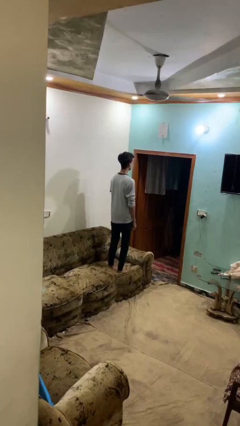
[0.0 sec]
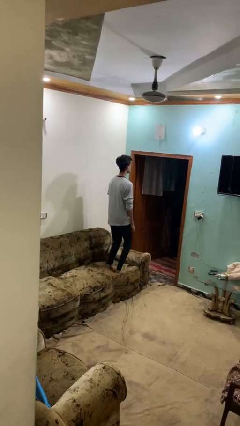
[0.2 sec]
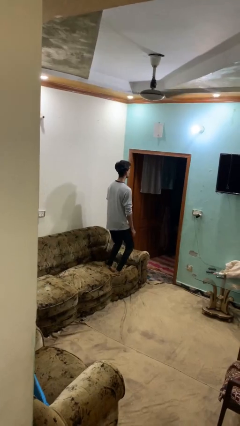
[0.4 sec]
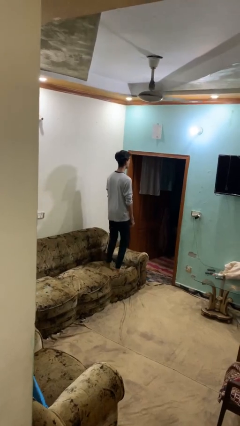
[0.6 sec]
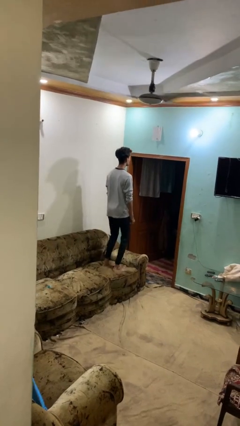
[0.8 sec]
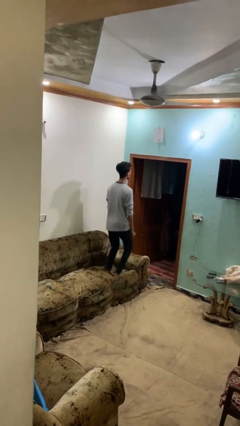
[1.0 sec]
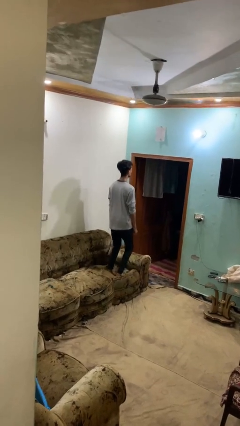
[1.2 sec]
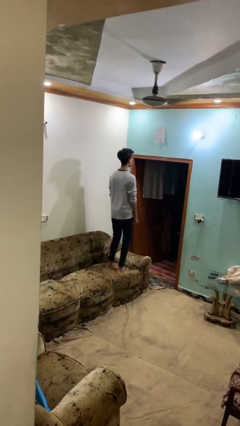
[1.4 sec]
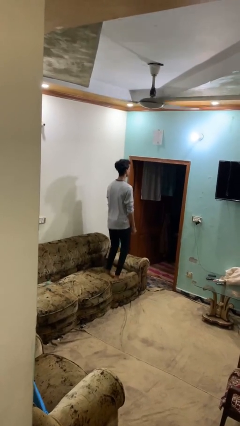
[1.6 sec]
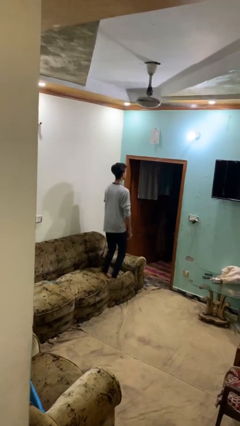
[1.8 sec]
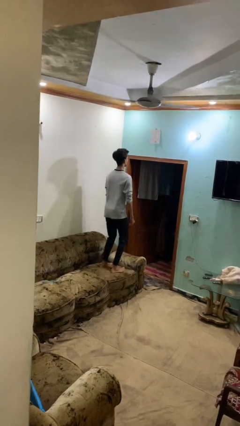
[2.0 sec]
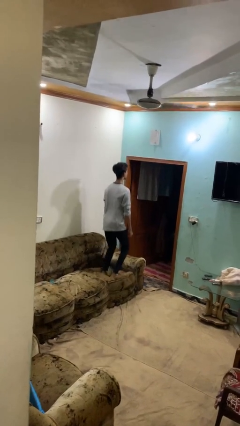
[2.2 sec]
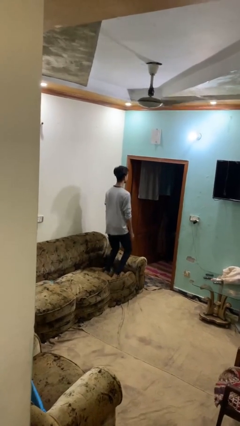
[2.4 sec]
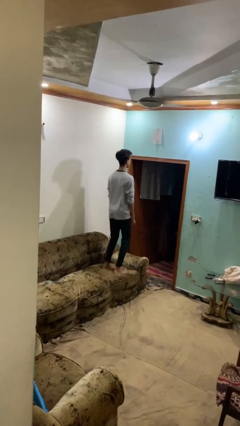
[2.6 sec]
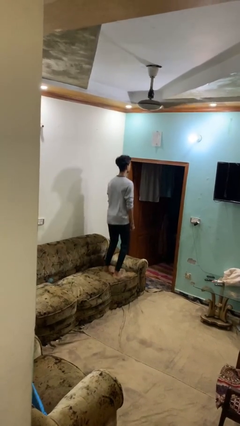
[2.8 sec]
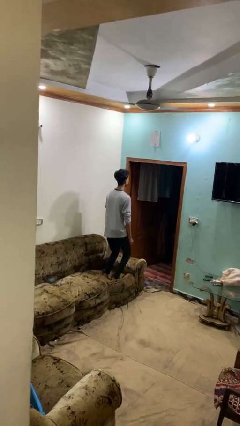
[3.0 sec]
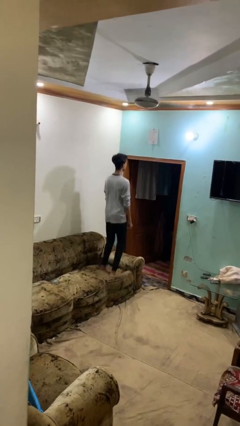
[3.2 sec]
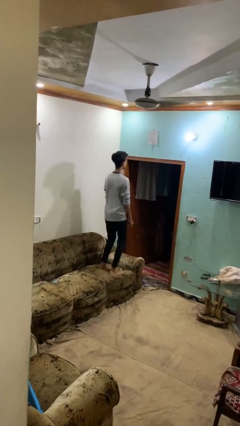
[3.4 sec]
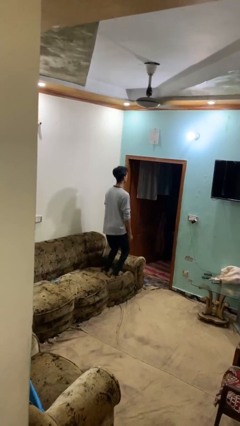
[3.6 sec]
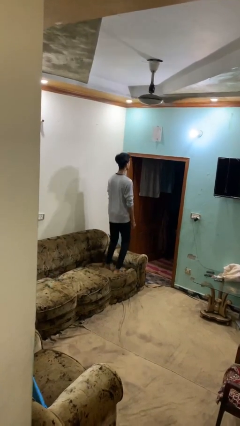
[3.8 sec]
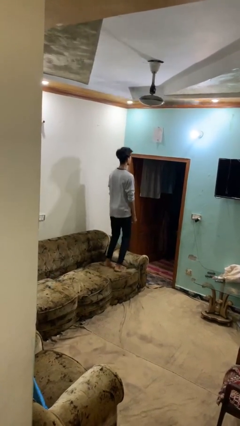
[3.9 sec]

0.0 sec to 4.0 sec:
person jumps on couch

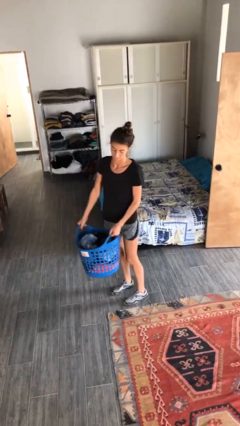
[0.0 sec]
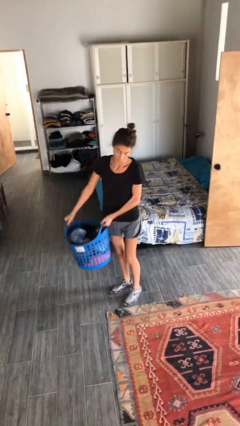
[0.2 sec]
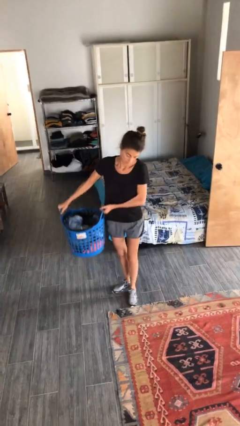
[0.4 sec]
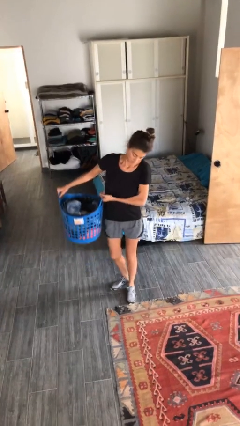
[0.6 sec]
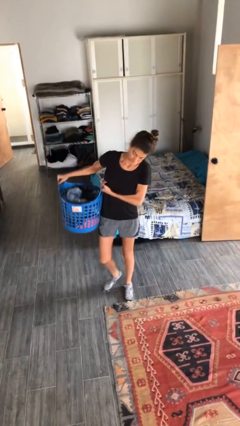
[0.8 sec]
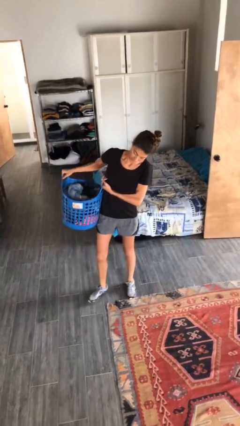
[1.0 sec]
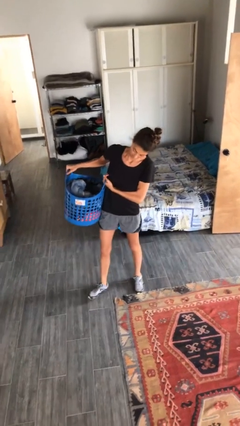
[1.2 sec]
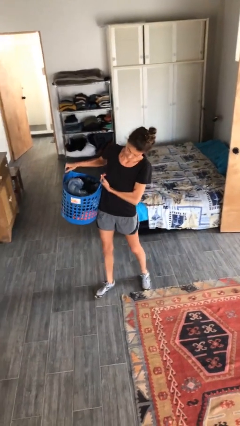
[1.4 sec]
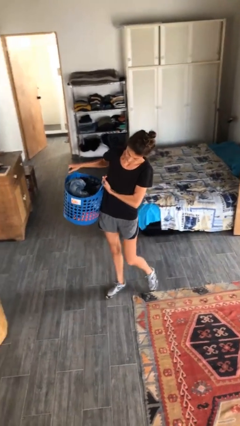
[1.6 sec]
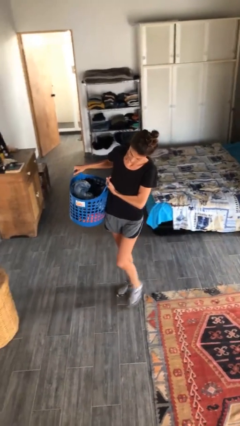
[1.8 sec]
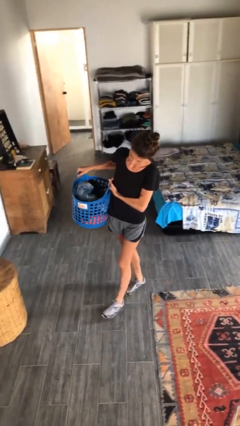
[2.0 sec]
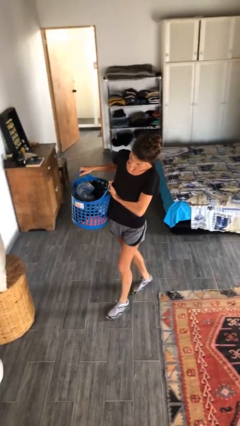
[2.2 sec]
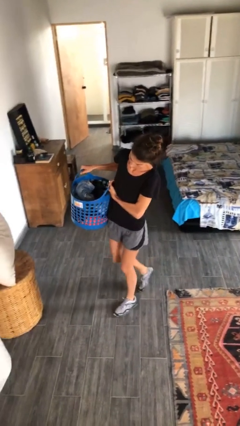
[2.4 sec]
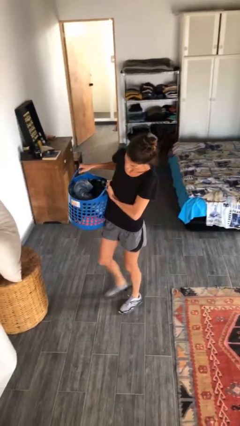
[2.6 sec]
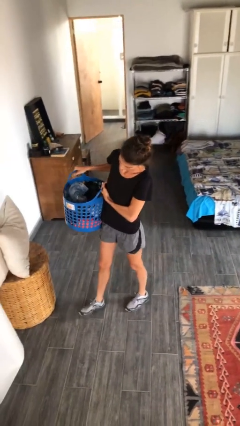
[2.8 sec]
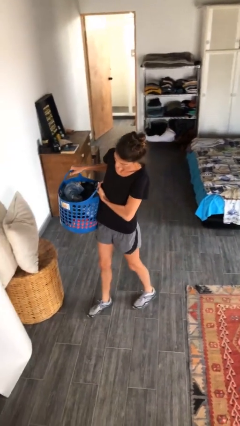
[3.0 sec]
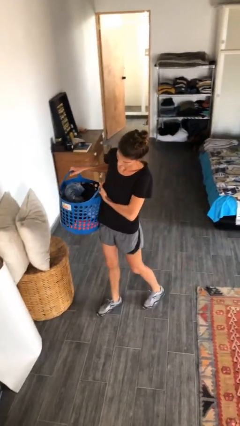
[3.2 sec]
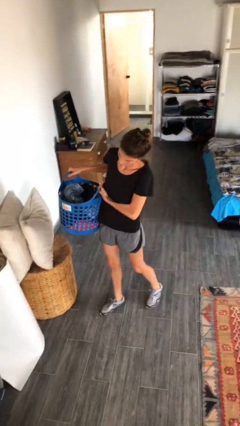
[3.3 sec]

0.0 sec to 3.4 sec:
person carries laundry basket

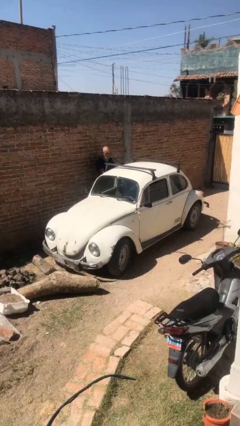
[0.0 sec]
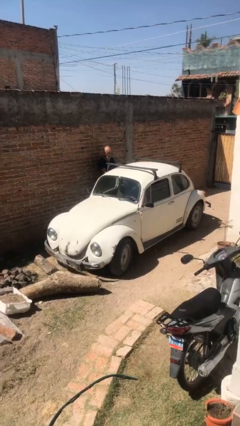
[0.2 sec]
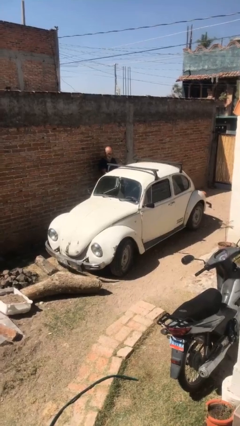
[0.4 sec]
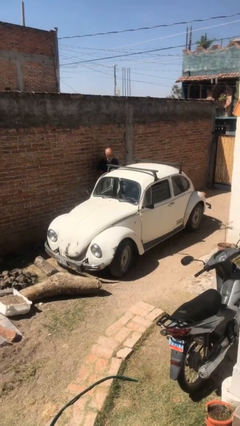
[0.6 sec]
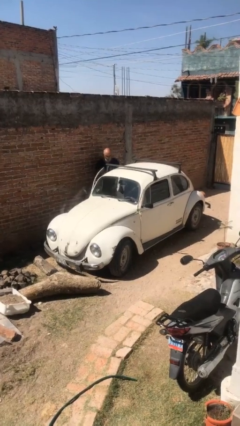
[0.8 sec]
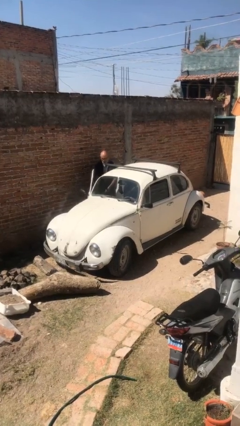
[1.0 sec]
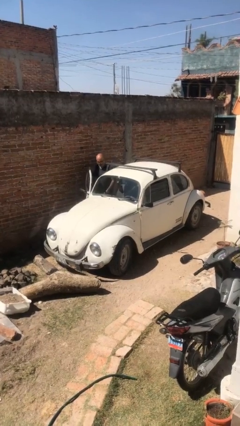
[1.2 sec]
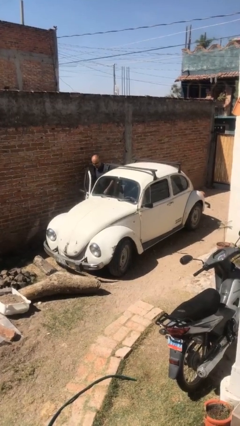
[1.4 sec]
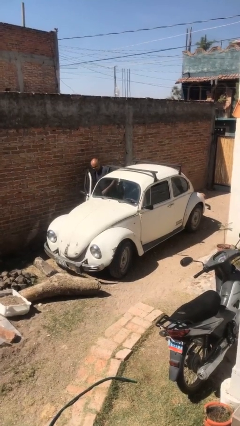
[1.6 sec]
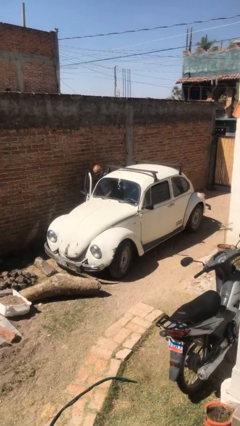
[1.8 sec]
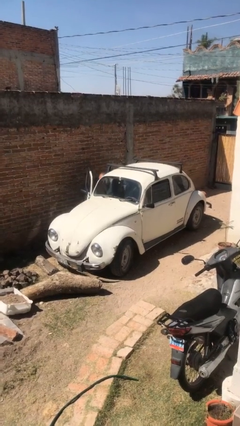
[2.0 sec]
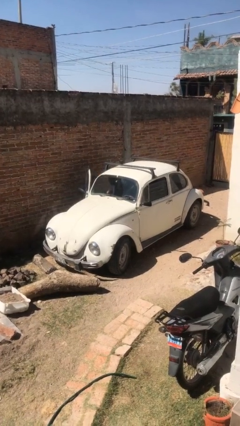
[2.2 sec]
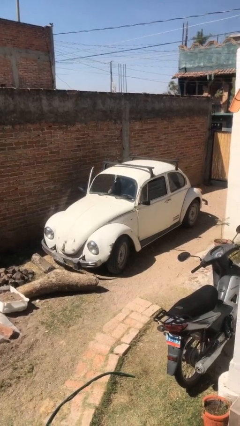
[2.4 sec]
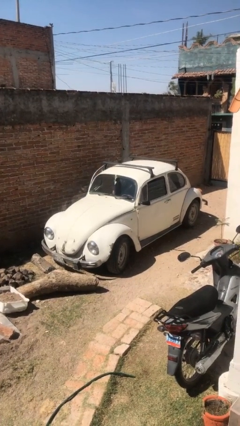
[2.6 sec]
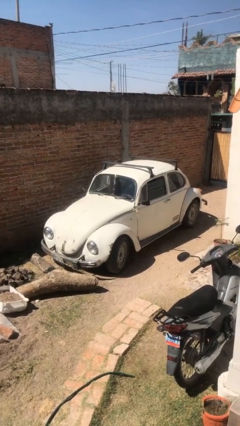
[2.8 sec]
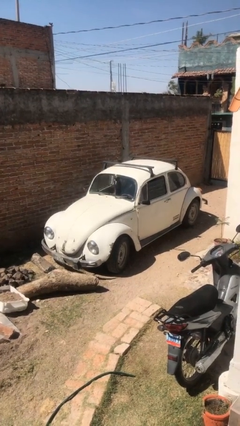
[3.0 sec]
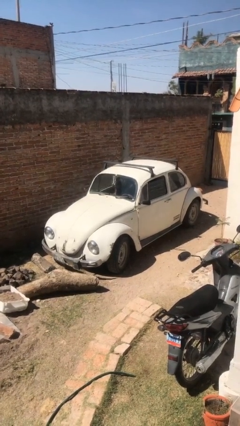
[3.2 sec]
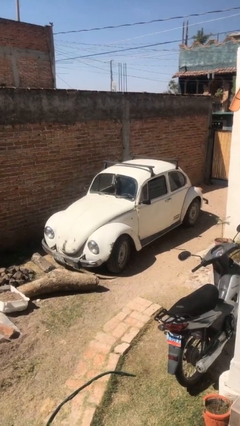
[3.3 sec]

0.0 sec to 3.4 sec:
car picks up person

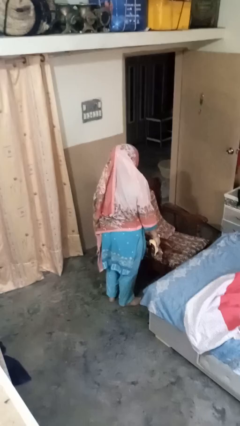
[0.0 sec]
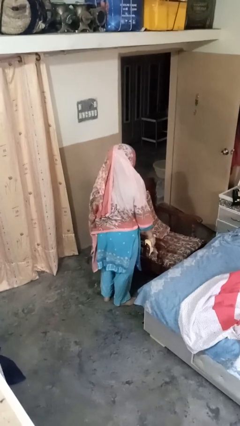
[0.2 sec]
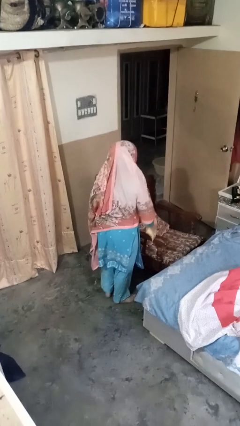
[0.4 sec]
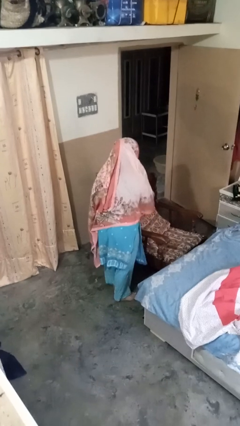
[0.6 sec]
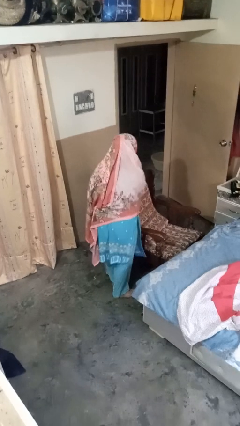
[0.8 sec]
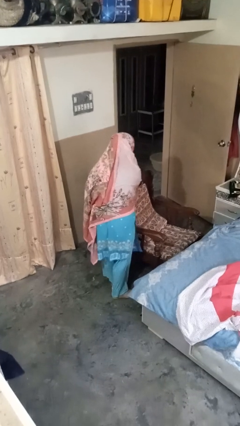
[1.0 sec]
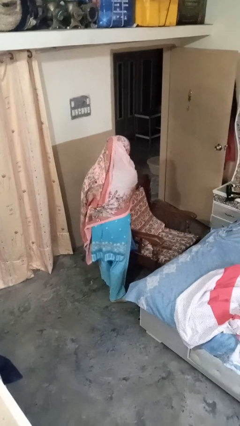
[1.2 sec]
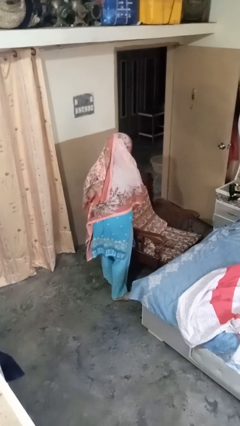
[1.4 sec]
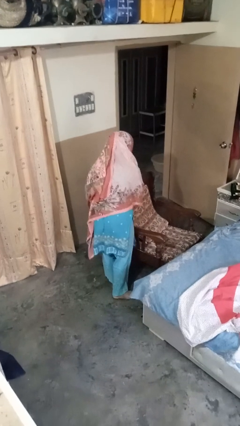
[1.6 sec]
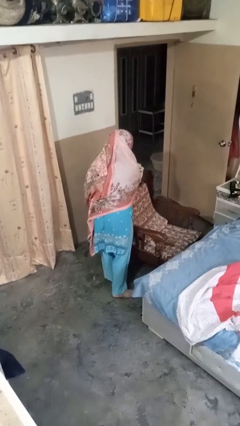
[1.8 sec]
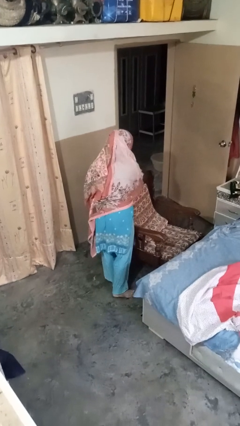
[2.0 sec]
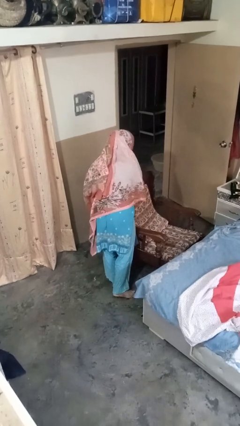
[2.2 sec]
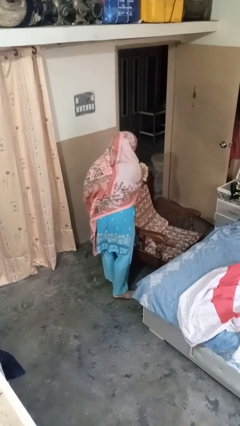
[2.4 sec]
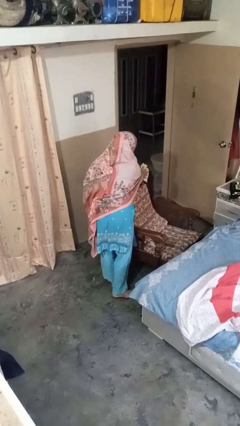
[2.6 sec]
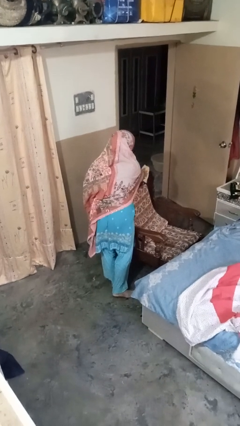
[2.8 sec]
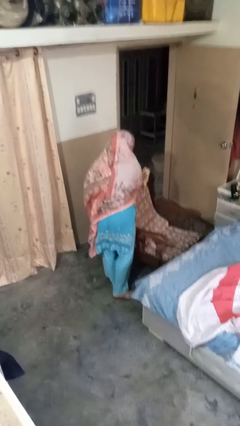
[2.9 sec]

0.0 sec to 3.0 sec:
person dusts furniture

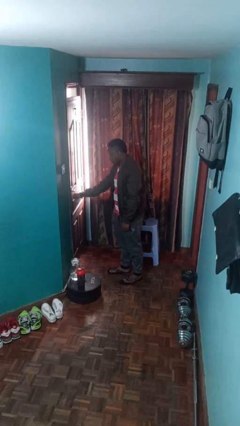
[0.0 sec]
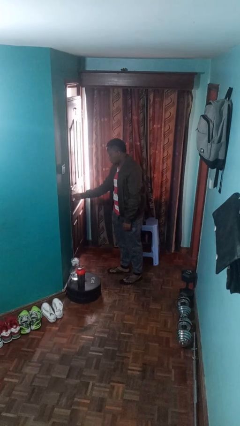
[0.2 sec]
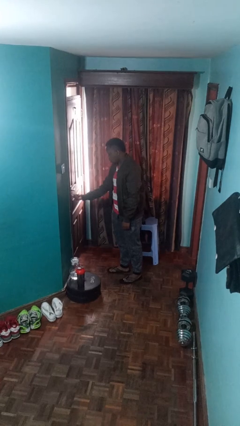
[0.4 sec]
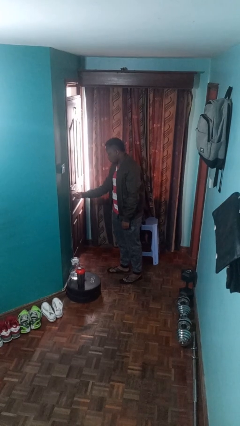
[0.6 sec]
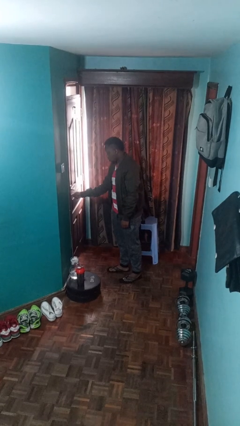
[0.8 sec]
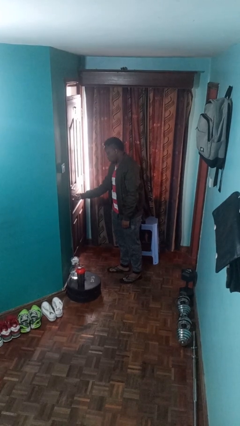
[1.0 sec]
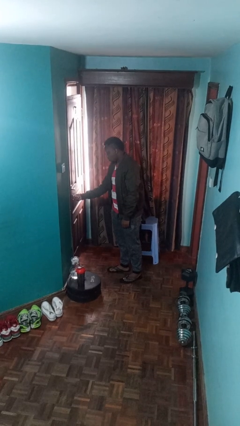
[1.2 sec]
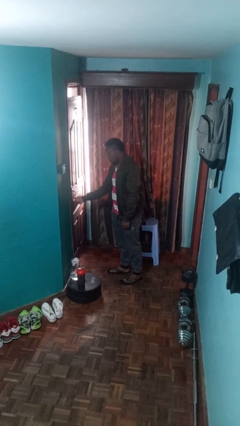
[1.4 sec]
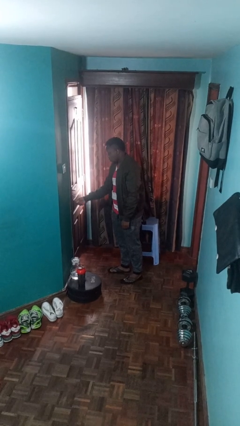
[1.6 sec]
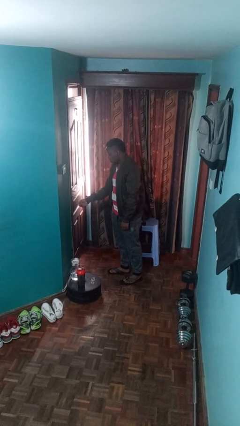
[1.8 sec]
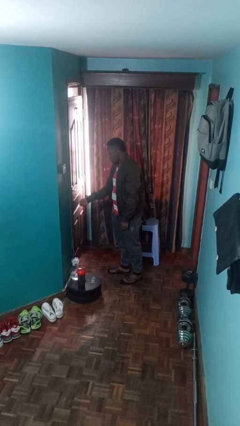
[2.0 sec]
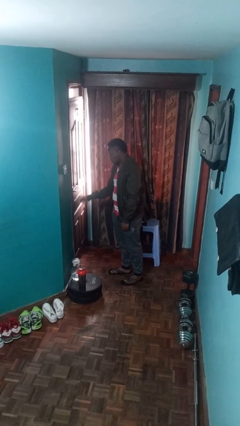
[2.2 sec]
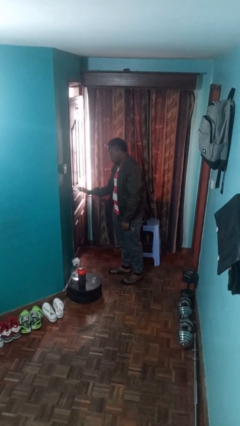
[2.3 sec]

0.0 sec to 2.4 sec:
person unlocks door with keys

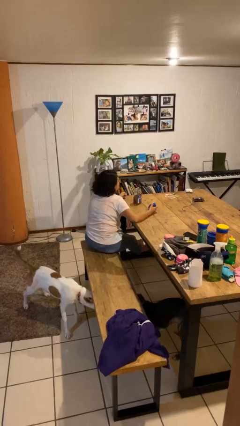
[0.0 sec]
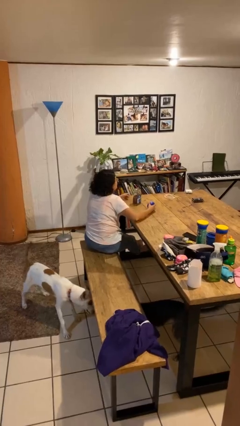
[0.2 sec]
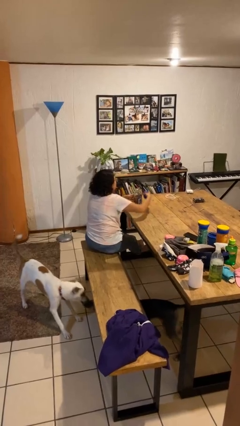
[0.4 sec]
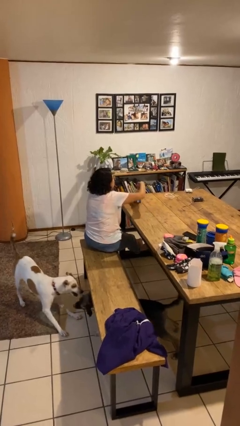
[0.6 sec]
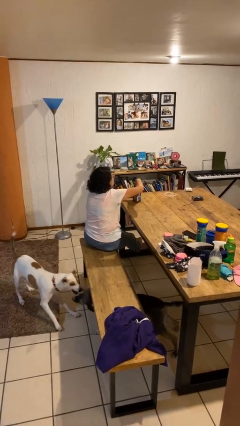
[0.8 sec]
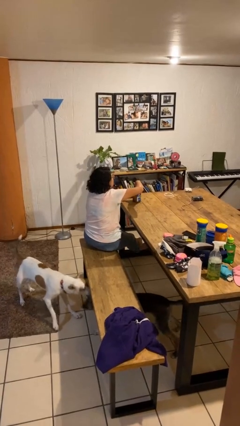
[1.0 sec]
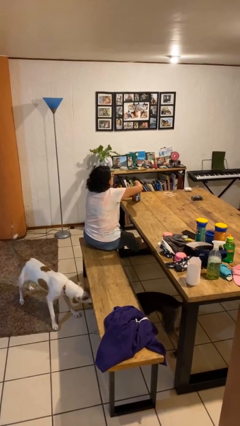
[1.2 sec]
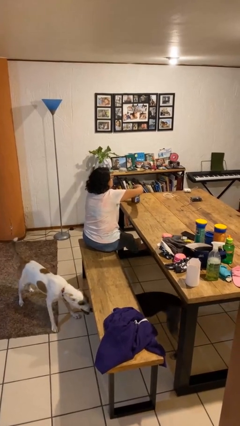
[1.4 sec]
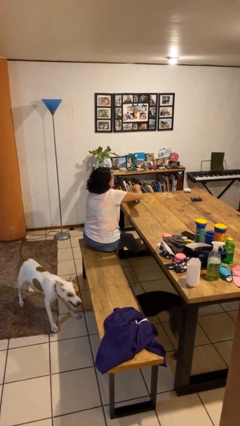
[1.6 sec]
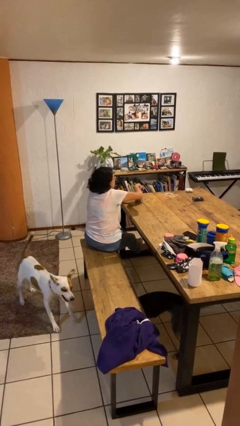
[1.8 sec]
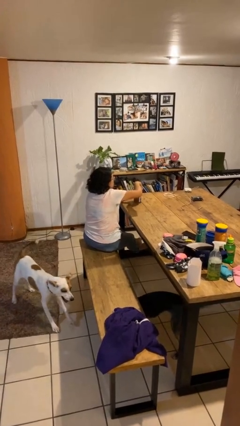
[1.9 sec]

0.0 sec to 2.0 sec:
person closes jar
